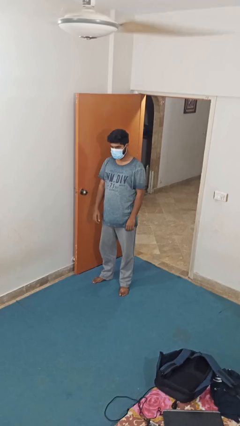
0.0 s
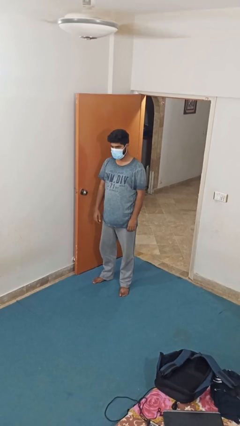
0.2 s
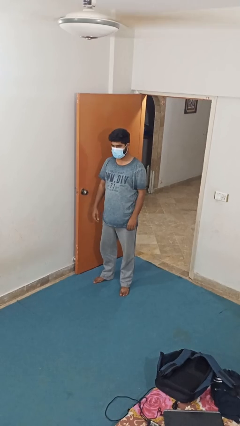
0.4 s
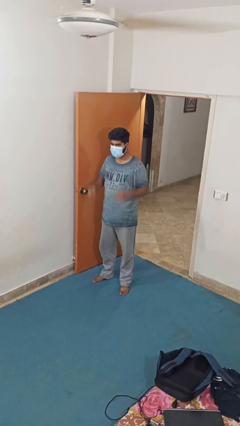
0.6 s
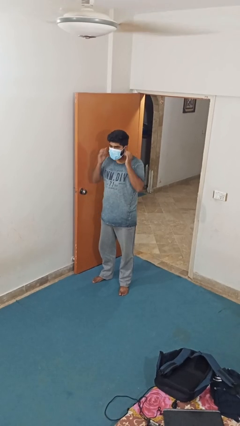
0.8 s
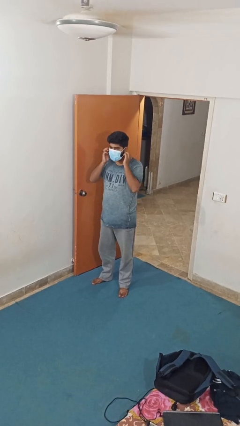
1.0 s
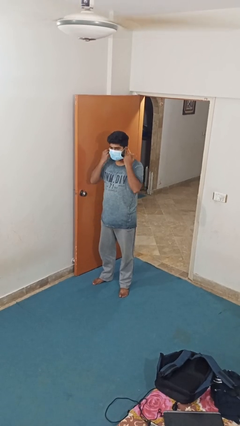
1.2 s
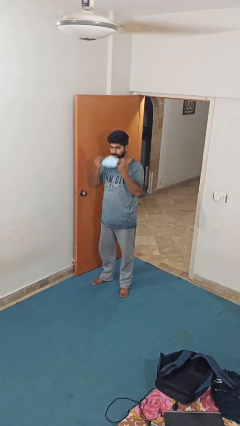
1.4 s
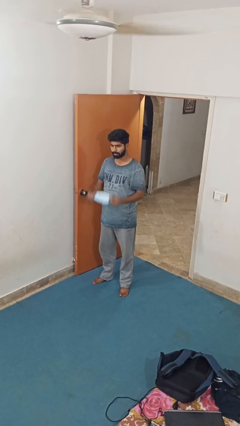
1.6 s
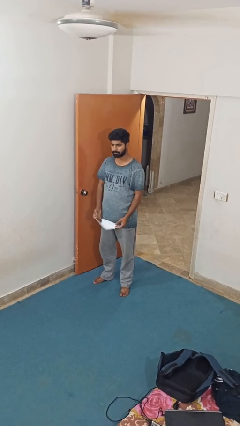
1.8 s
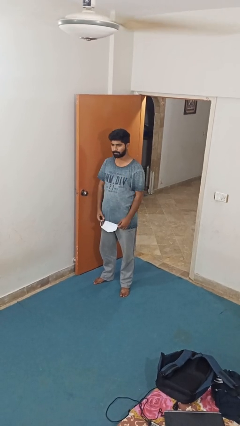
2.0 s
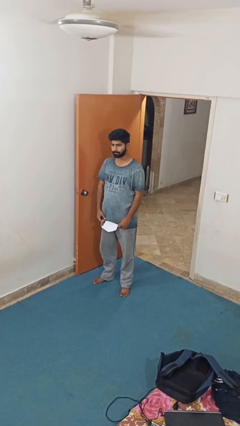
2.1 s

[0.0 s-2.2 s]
person takes off facemask

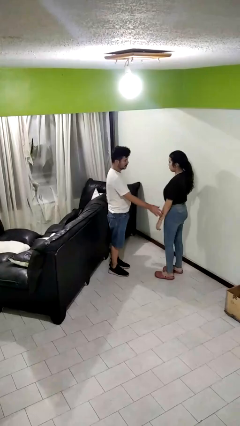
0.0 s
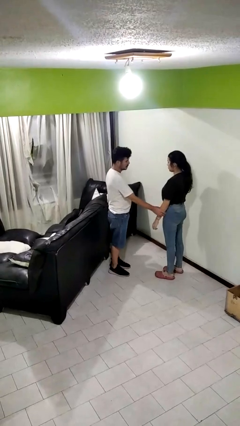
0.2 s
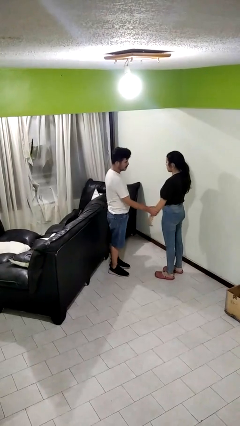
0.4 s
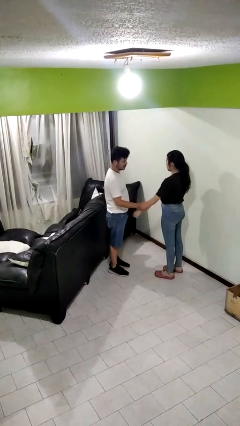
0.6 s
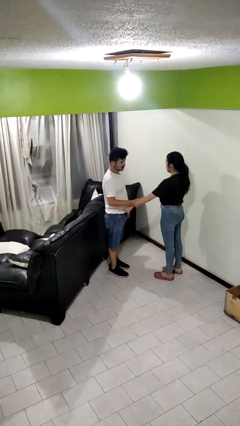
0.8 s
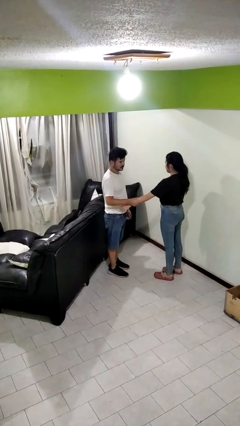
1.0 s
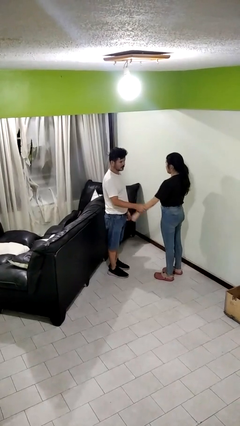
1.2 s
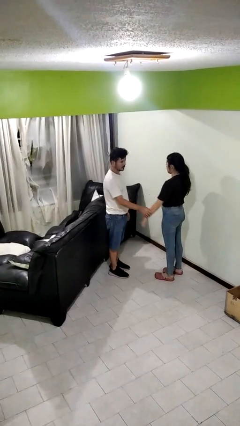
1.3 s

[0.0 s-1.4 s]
person grabs person by forearm

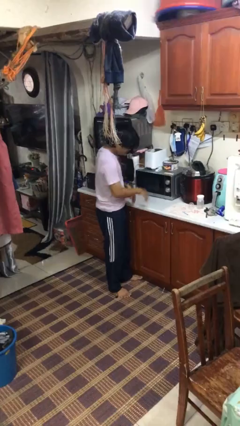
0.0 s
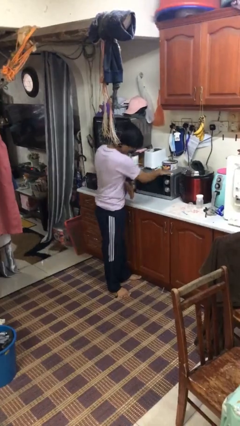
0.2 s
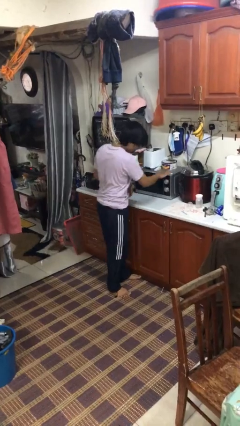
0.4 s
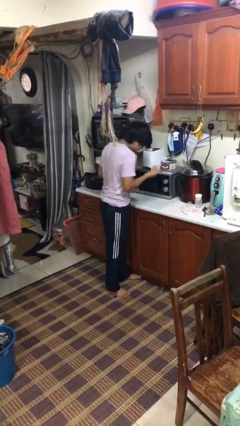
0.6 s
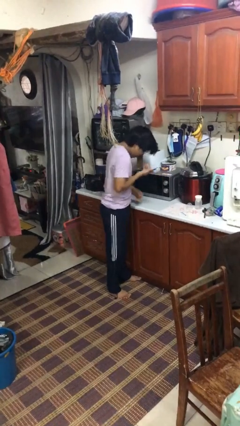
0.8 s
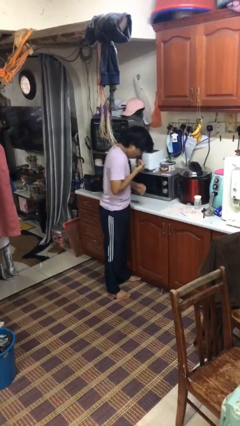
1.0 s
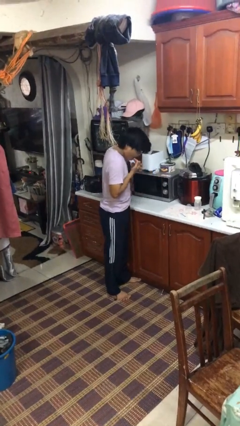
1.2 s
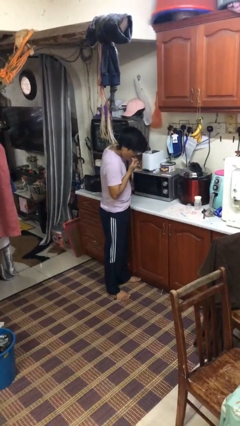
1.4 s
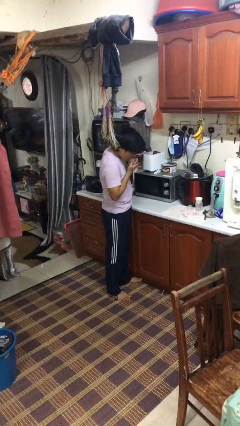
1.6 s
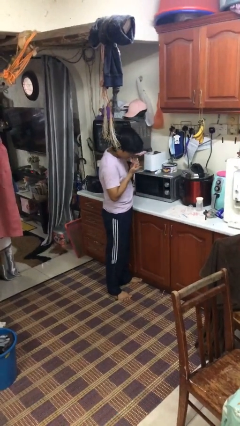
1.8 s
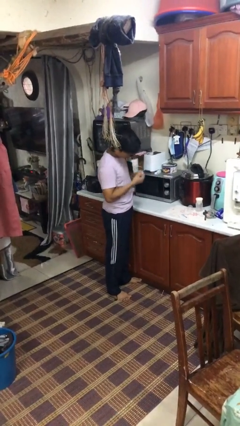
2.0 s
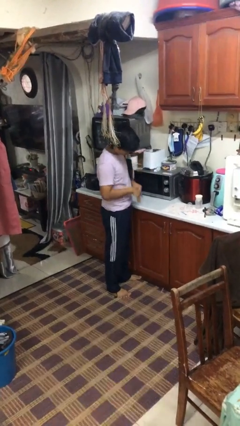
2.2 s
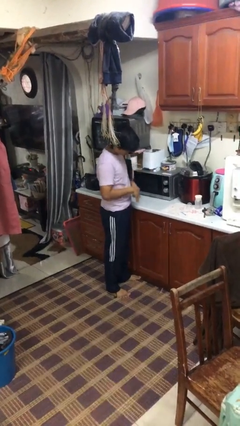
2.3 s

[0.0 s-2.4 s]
person burns hand

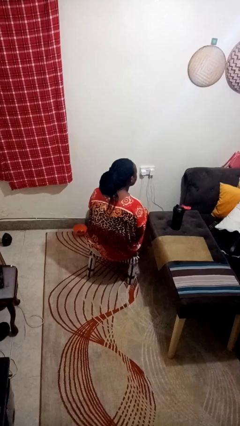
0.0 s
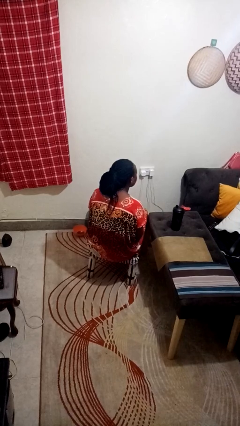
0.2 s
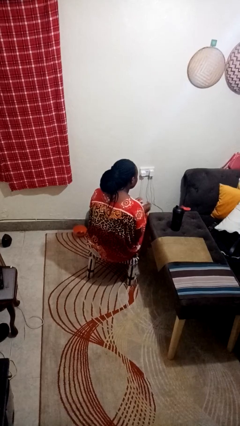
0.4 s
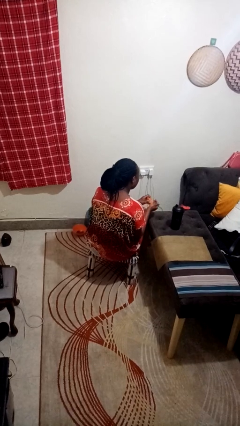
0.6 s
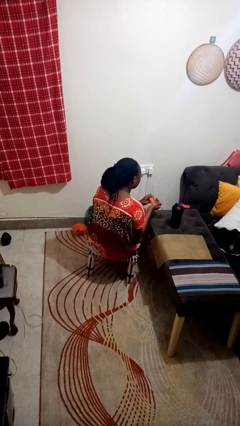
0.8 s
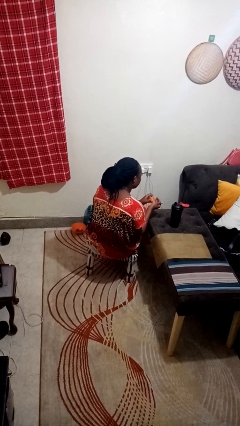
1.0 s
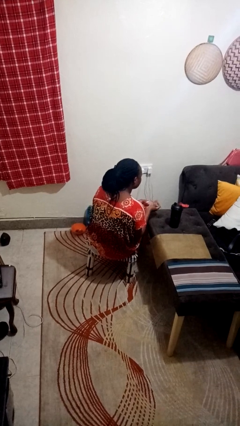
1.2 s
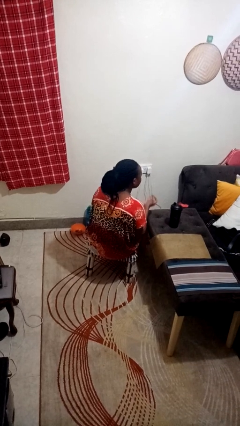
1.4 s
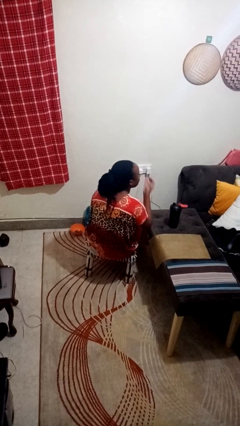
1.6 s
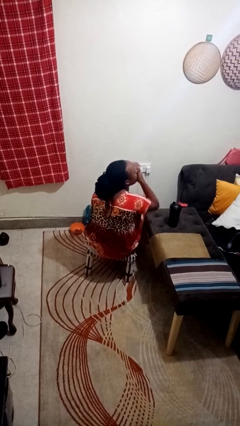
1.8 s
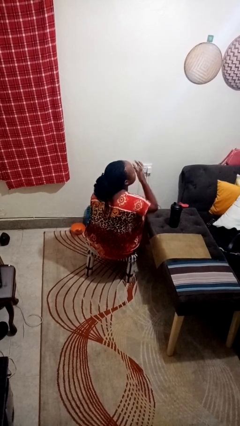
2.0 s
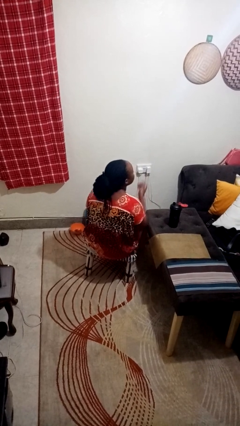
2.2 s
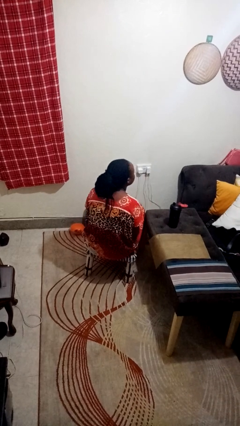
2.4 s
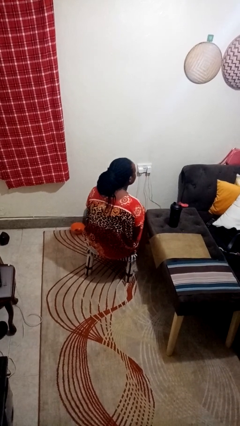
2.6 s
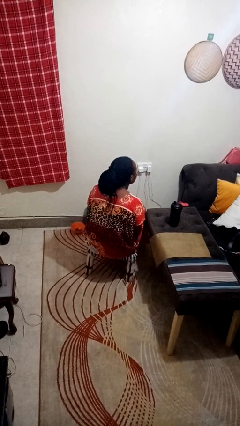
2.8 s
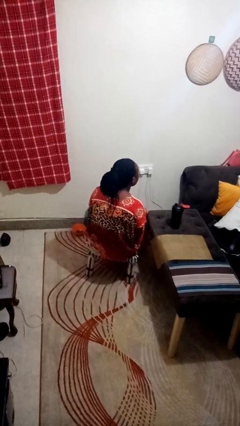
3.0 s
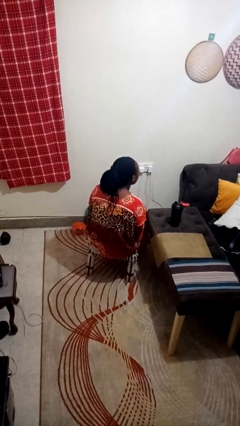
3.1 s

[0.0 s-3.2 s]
person takes medicine pills

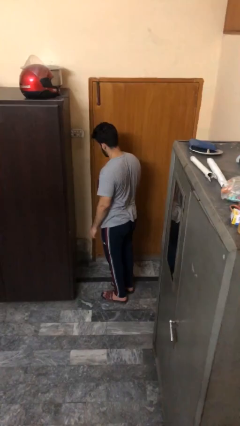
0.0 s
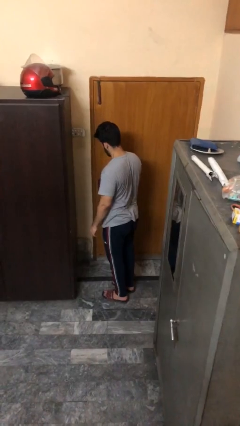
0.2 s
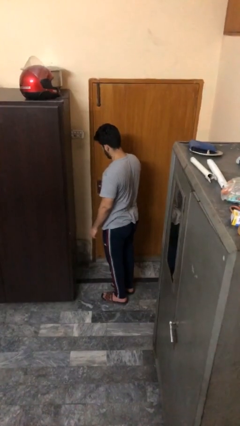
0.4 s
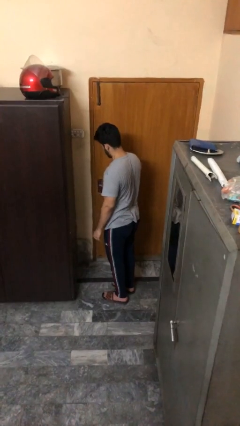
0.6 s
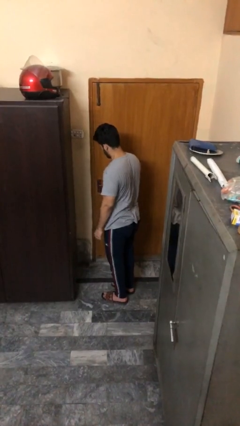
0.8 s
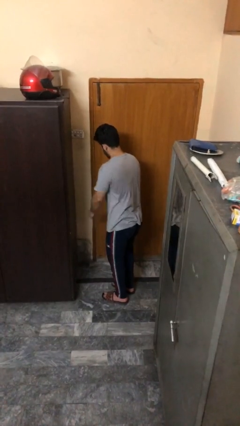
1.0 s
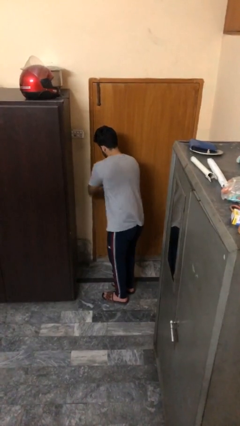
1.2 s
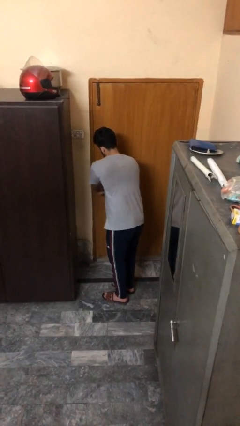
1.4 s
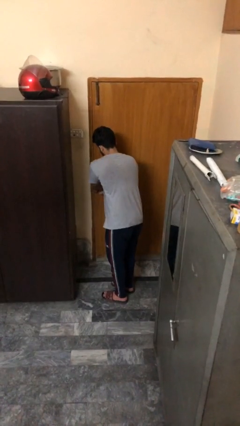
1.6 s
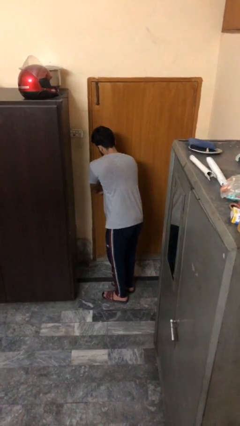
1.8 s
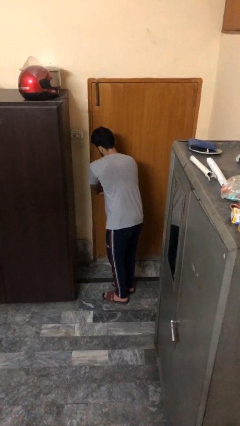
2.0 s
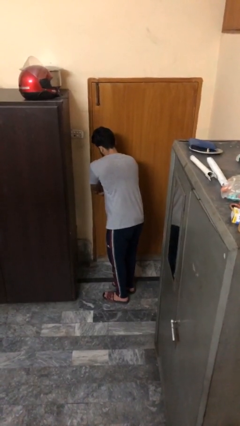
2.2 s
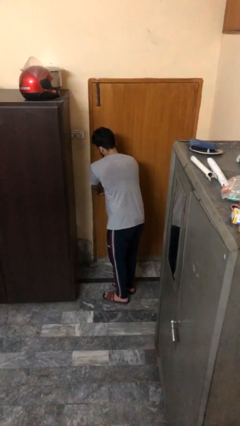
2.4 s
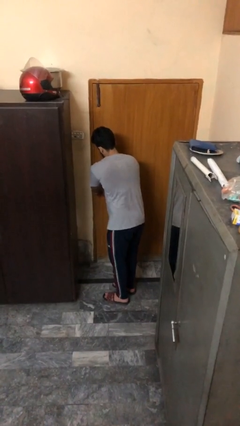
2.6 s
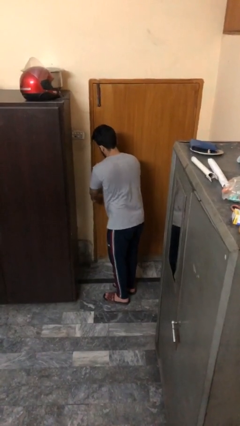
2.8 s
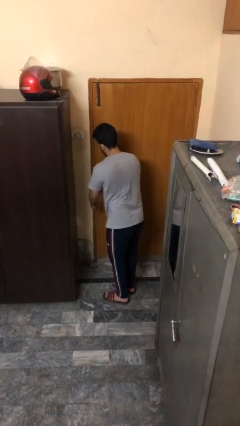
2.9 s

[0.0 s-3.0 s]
person unlocks door with keys

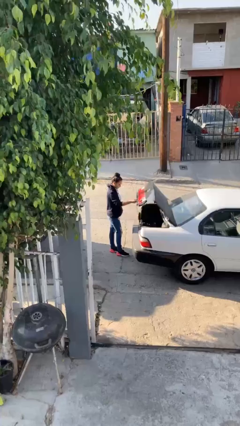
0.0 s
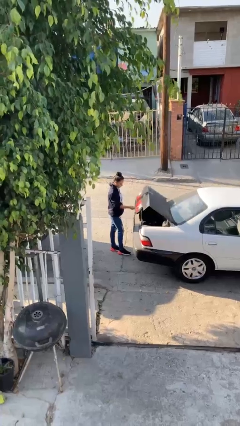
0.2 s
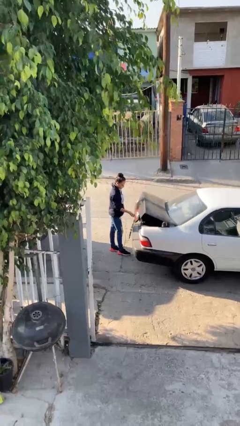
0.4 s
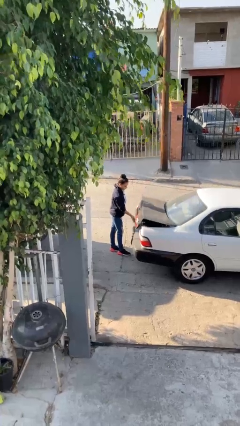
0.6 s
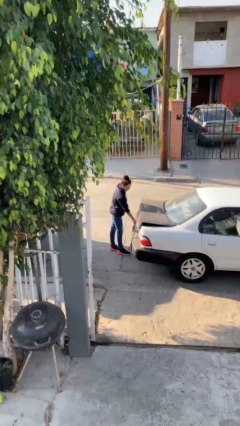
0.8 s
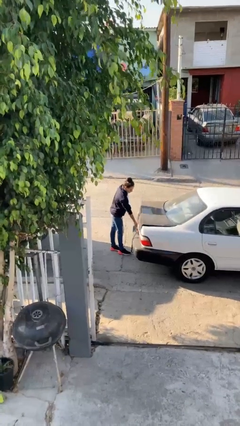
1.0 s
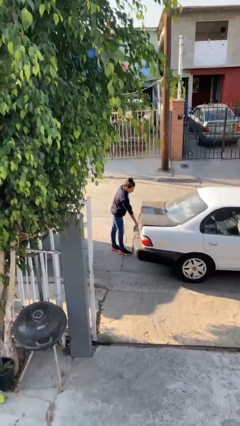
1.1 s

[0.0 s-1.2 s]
person closes car trunk

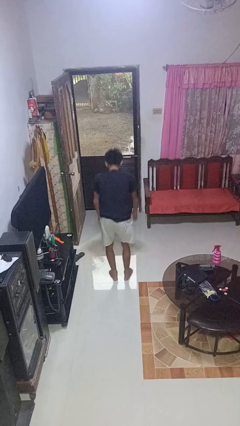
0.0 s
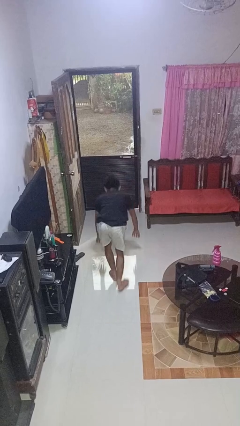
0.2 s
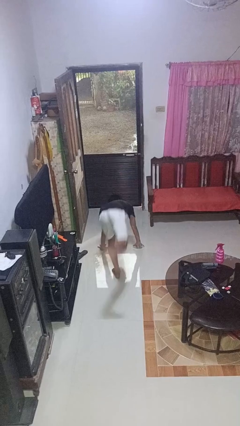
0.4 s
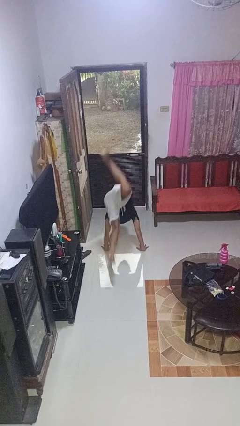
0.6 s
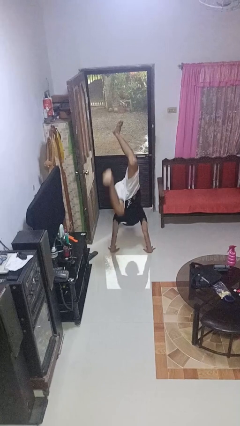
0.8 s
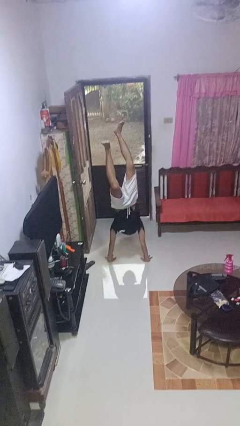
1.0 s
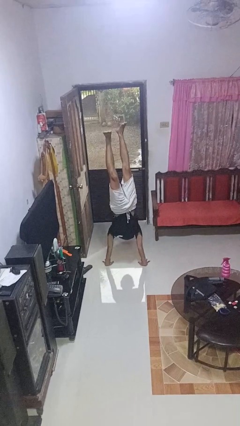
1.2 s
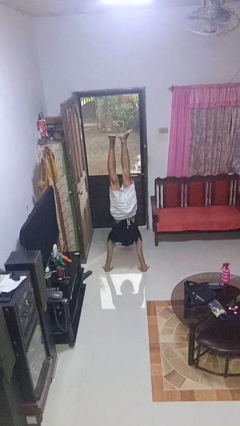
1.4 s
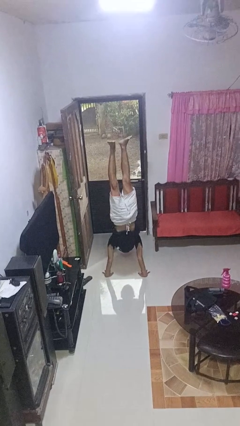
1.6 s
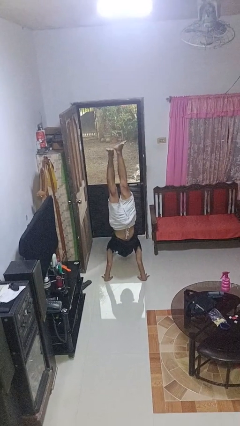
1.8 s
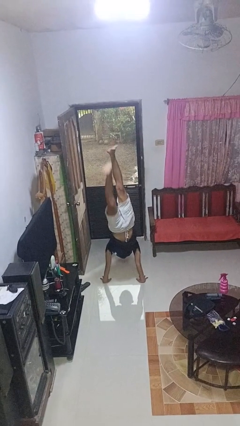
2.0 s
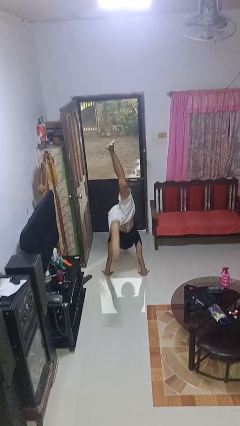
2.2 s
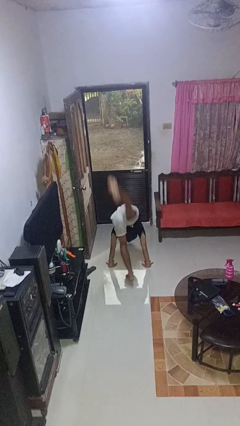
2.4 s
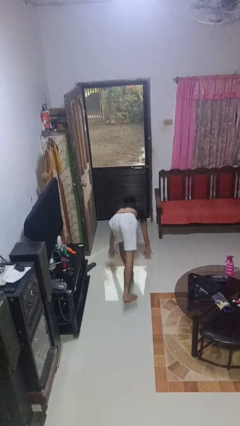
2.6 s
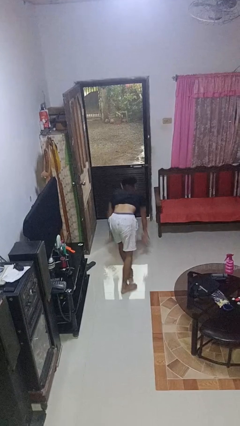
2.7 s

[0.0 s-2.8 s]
person handstand
